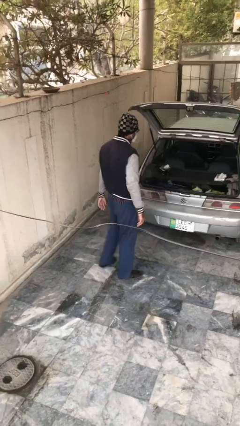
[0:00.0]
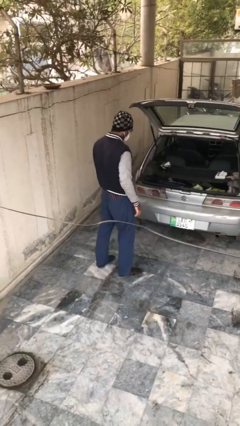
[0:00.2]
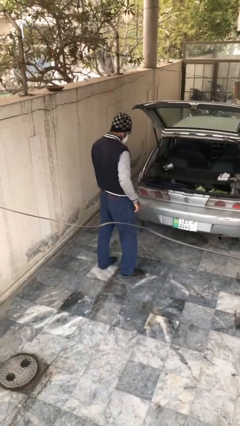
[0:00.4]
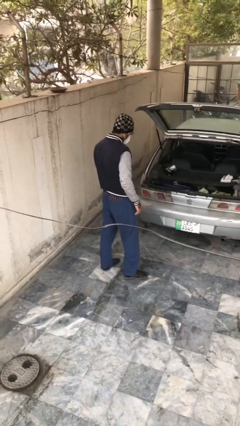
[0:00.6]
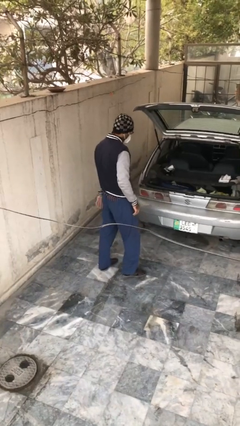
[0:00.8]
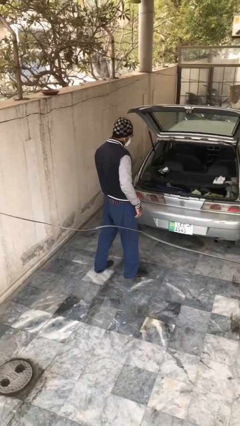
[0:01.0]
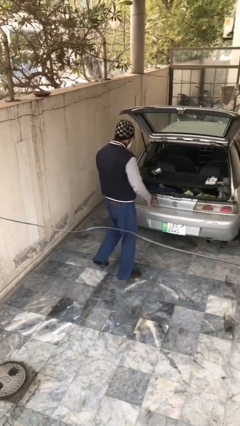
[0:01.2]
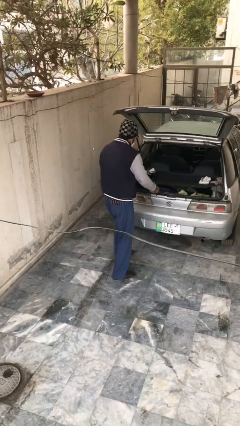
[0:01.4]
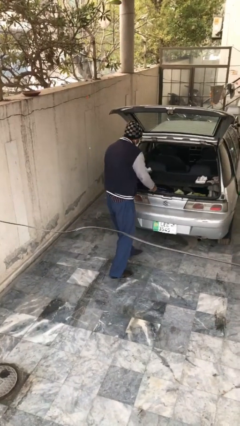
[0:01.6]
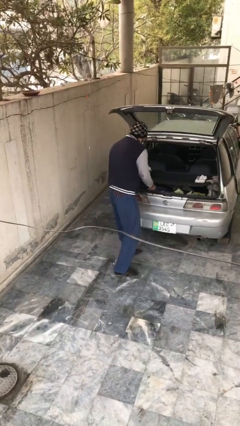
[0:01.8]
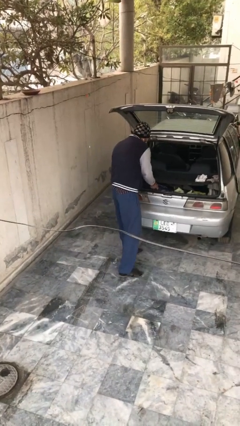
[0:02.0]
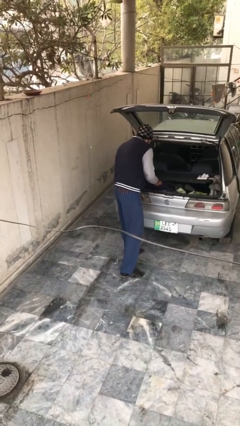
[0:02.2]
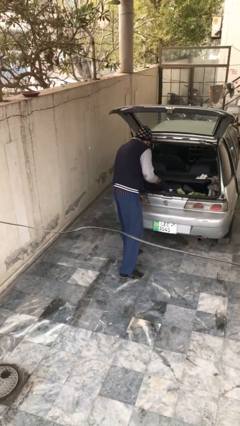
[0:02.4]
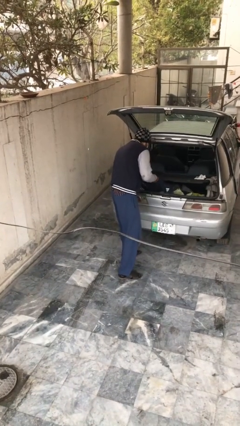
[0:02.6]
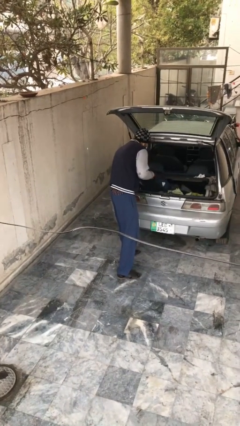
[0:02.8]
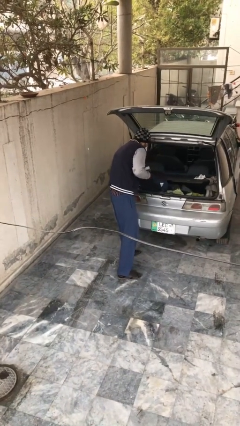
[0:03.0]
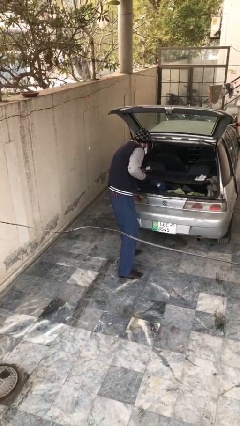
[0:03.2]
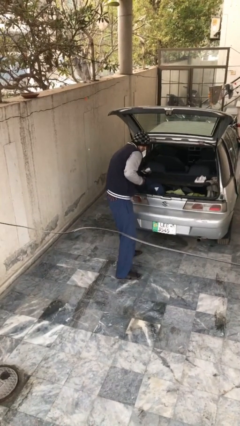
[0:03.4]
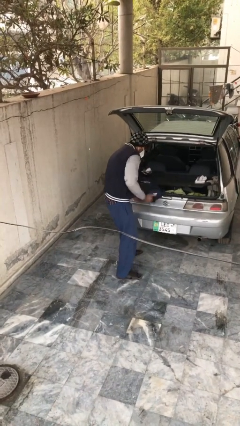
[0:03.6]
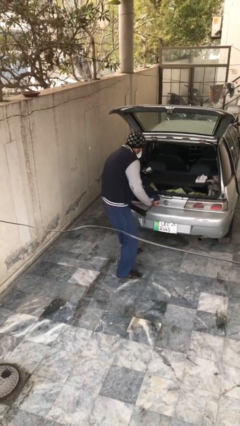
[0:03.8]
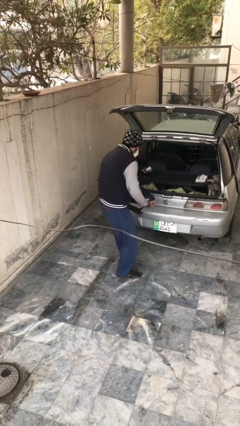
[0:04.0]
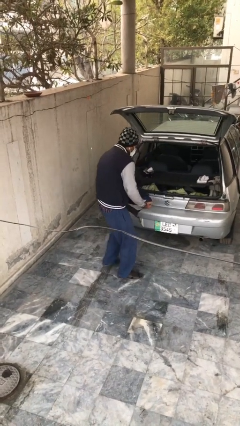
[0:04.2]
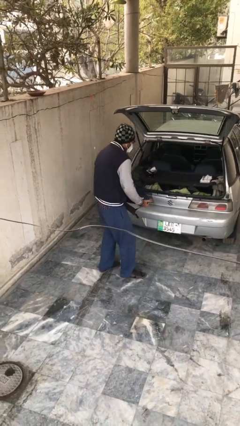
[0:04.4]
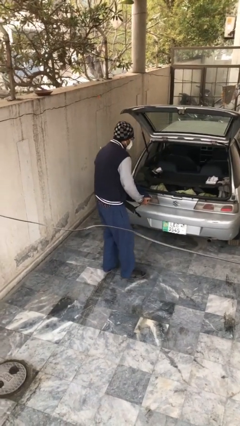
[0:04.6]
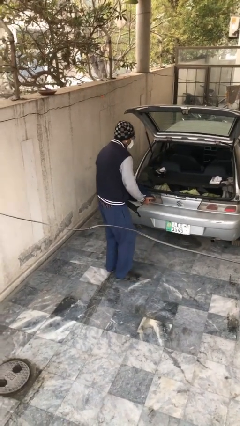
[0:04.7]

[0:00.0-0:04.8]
person unloads car

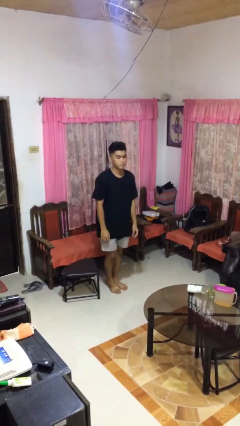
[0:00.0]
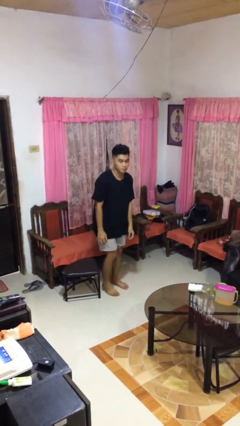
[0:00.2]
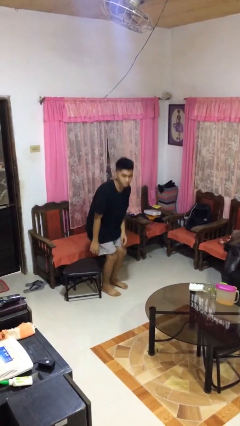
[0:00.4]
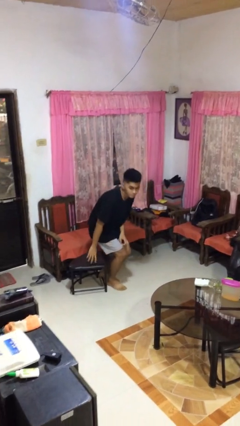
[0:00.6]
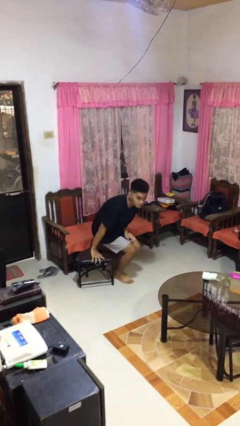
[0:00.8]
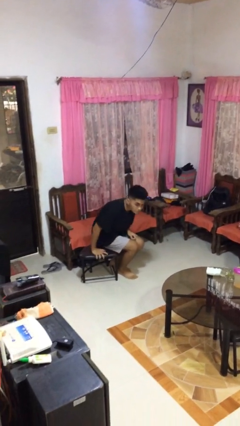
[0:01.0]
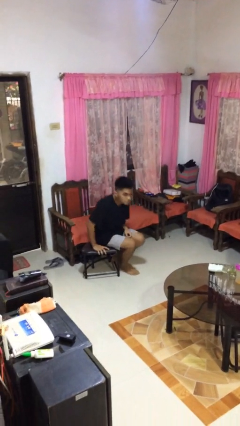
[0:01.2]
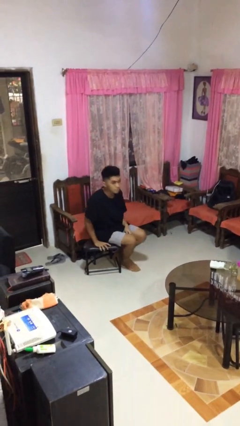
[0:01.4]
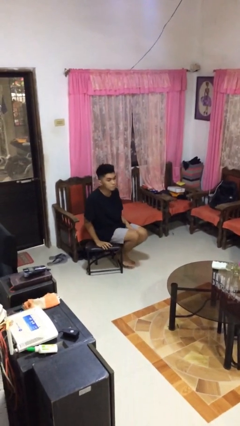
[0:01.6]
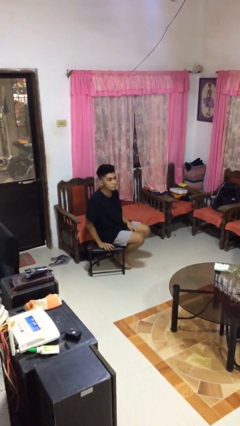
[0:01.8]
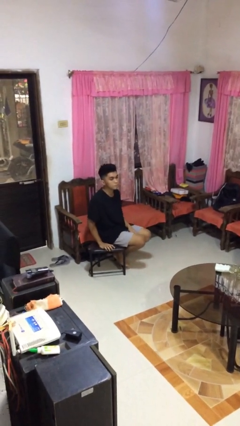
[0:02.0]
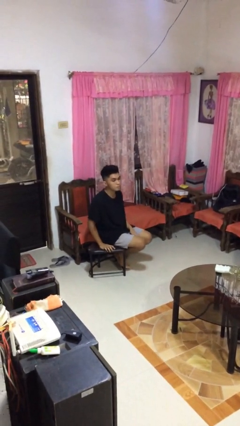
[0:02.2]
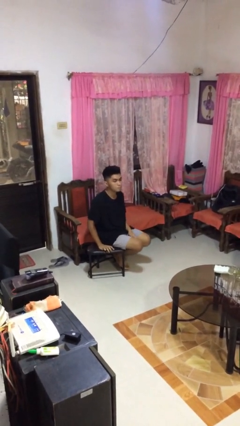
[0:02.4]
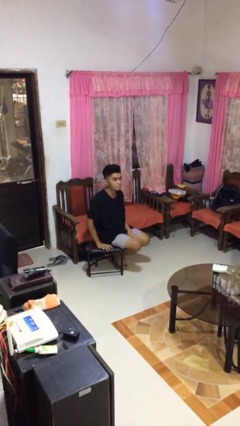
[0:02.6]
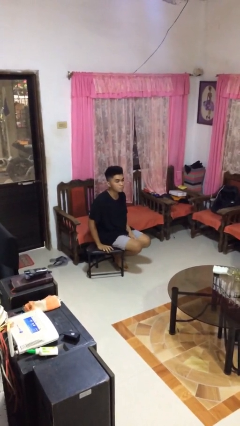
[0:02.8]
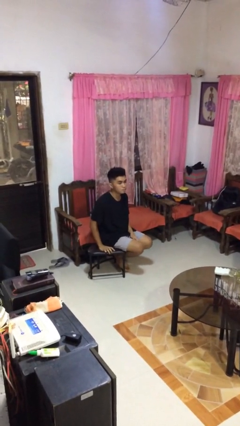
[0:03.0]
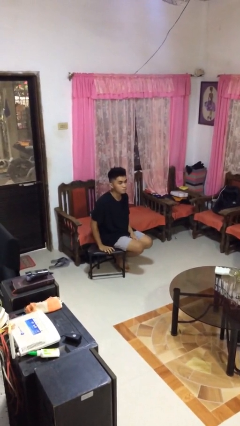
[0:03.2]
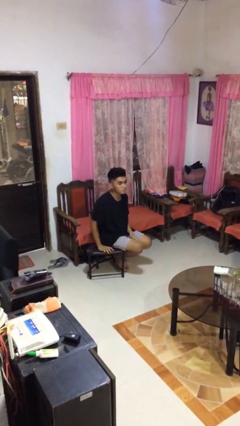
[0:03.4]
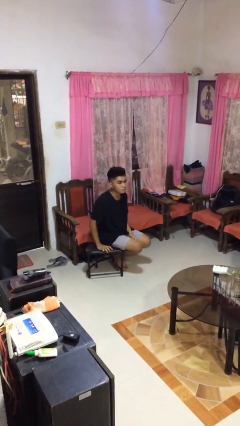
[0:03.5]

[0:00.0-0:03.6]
person sits down

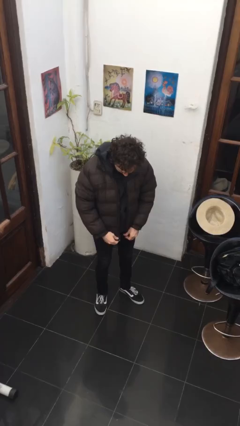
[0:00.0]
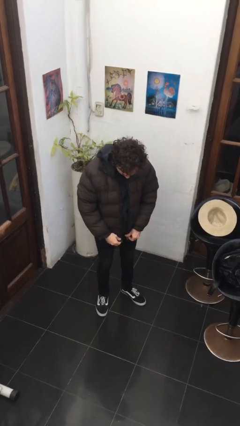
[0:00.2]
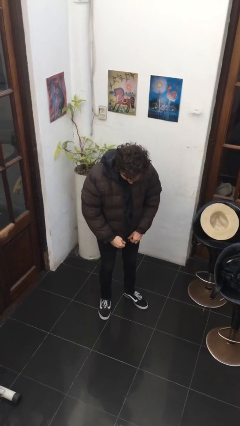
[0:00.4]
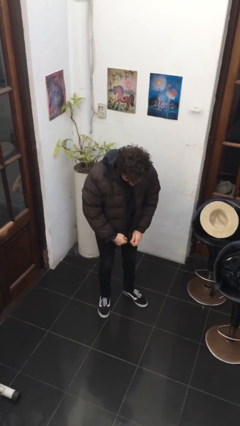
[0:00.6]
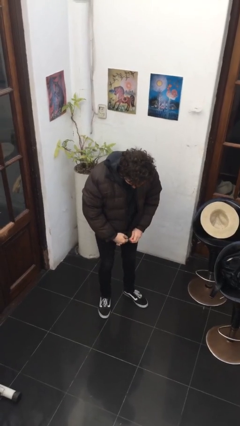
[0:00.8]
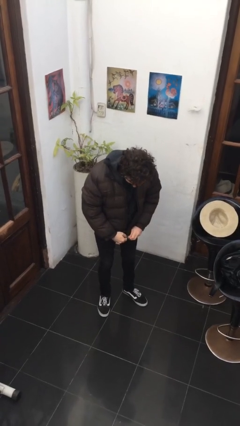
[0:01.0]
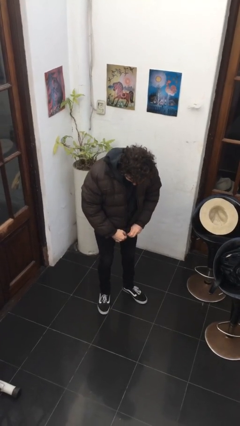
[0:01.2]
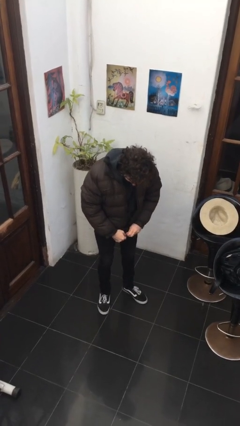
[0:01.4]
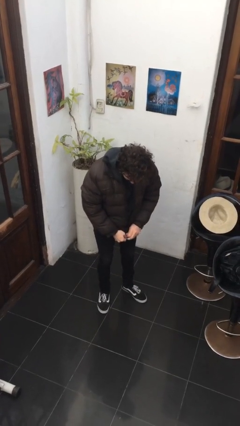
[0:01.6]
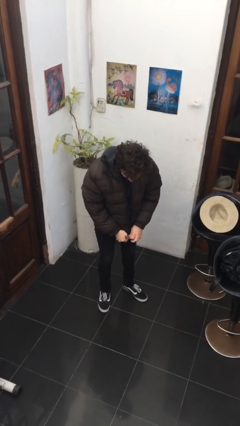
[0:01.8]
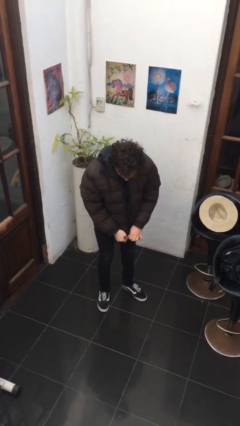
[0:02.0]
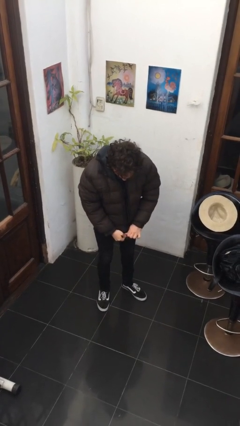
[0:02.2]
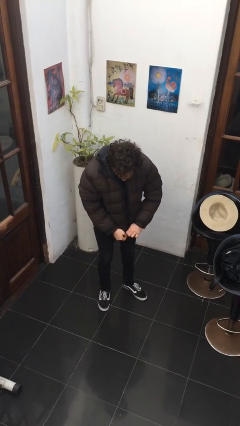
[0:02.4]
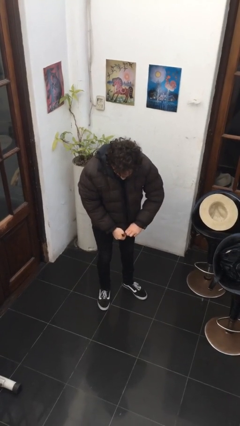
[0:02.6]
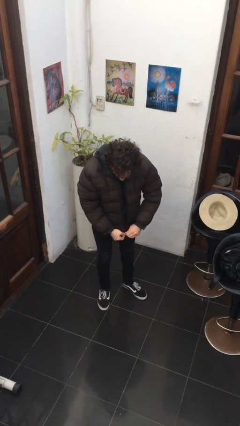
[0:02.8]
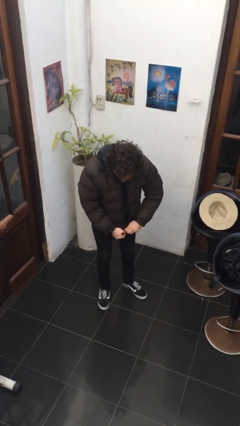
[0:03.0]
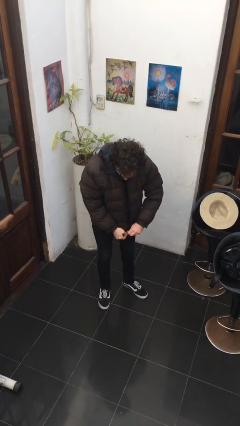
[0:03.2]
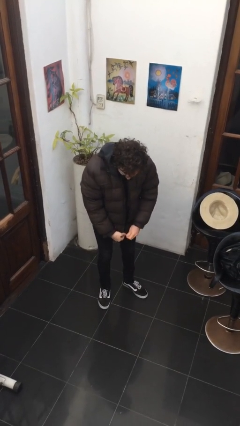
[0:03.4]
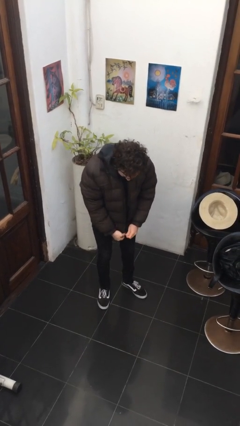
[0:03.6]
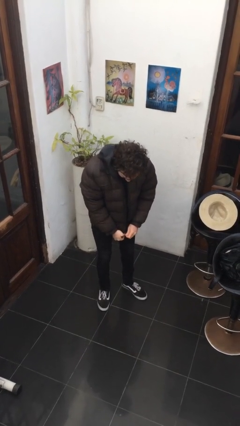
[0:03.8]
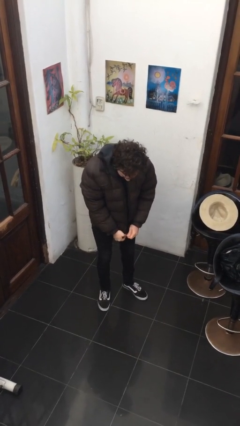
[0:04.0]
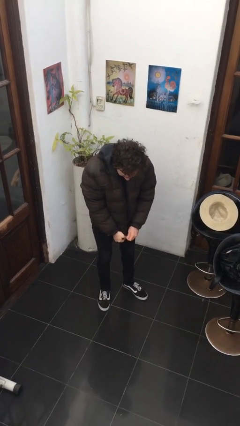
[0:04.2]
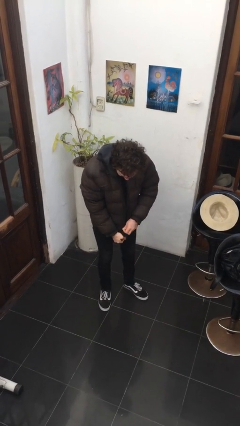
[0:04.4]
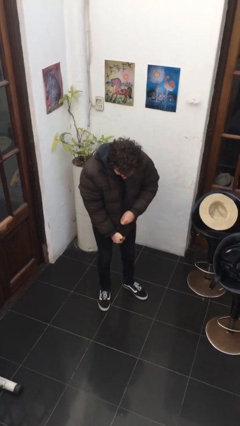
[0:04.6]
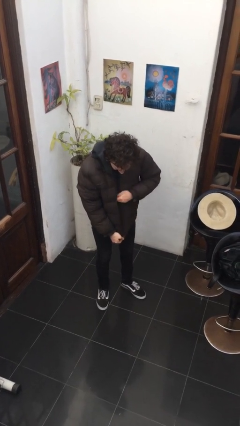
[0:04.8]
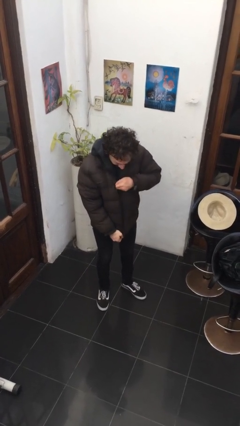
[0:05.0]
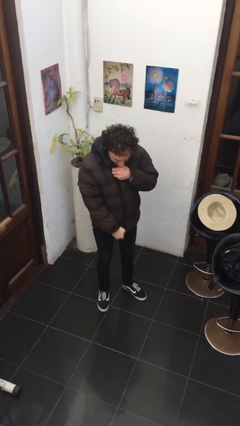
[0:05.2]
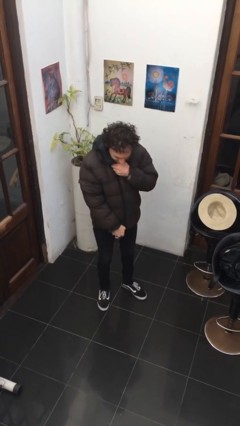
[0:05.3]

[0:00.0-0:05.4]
person zips up jacket

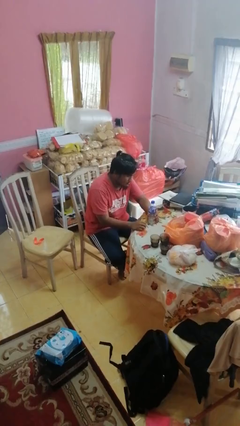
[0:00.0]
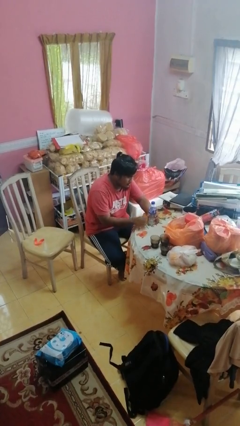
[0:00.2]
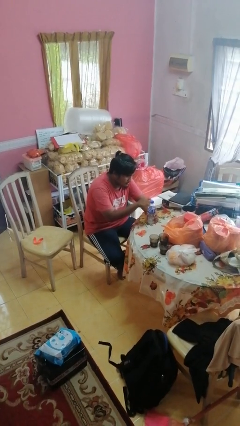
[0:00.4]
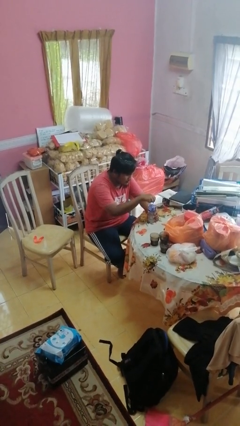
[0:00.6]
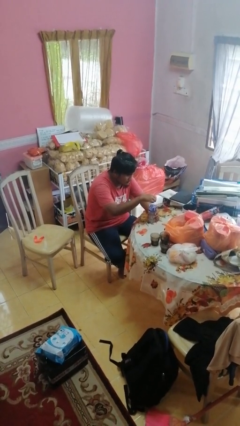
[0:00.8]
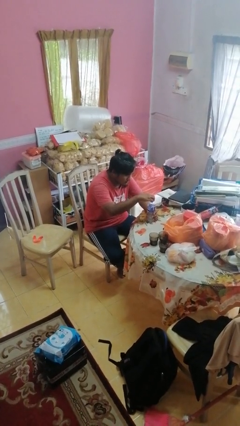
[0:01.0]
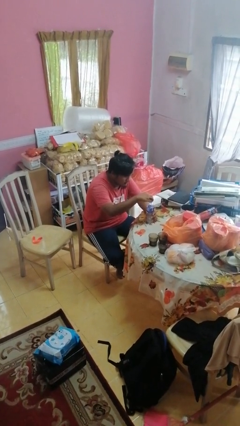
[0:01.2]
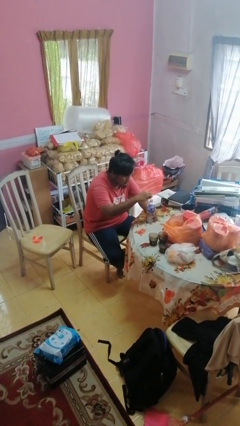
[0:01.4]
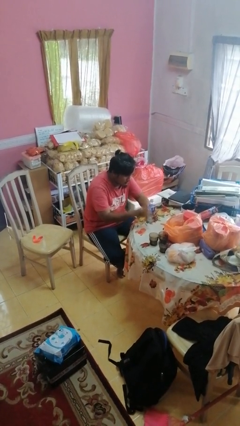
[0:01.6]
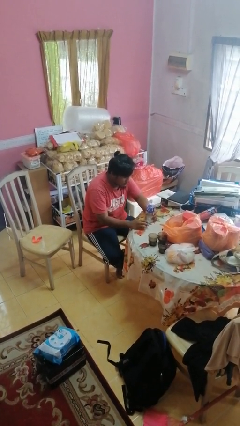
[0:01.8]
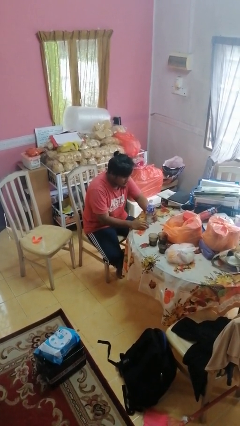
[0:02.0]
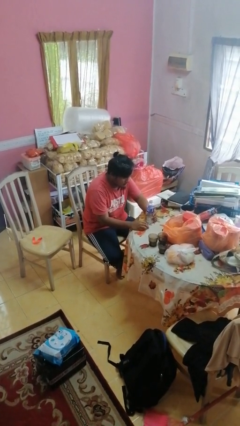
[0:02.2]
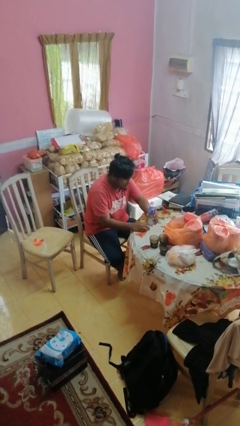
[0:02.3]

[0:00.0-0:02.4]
person unscrews lid from bottle

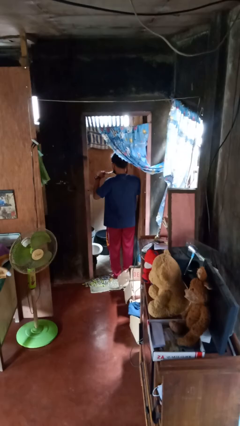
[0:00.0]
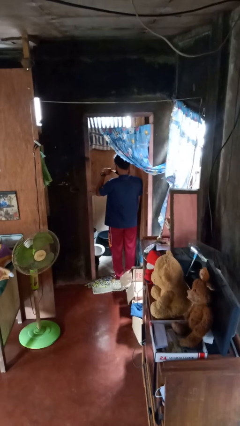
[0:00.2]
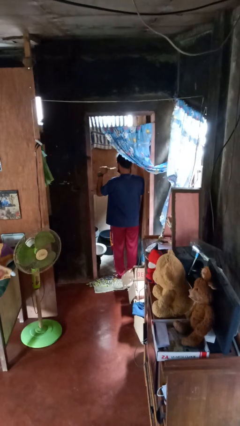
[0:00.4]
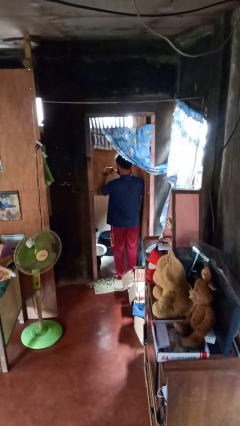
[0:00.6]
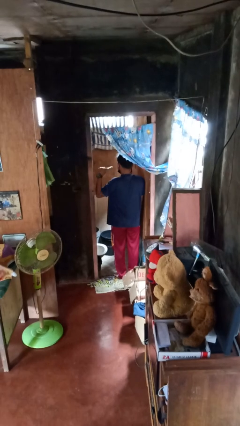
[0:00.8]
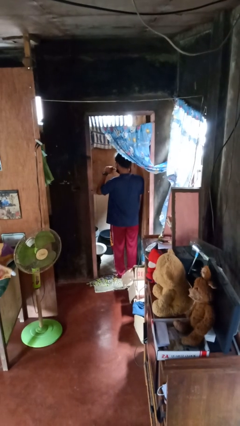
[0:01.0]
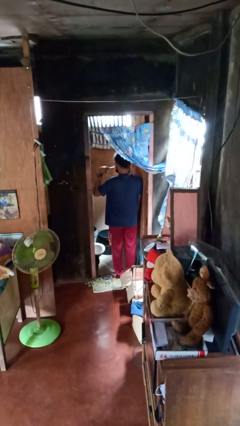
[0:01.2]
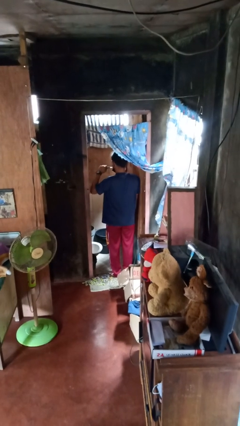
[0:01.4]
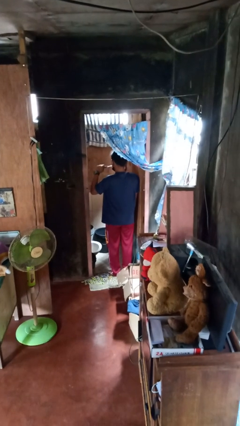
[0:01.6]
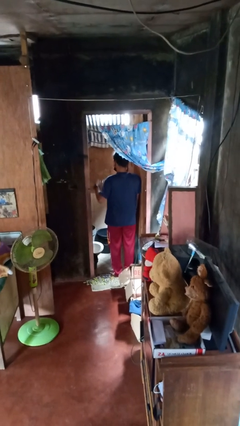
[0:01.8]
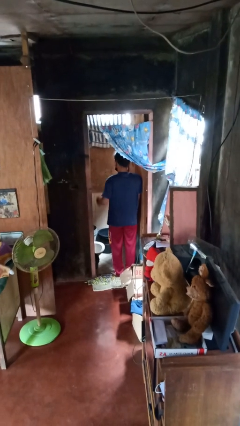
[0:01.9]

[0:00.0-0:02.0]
person brushes teeth
